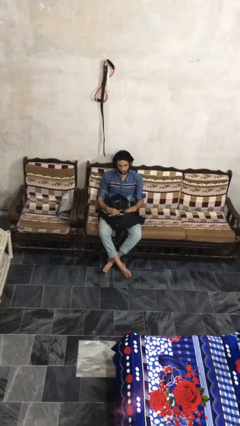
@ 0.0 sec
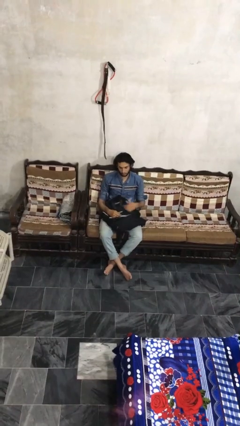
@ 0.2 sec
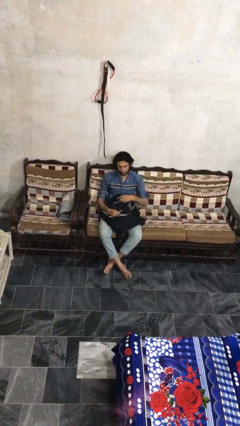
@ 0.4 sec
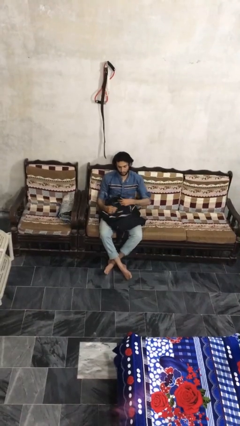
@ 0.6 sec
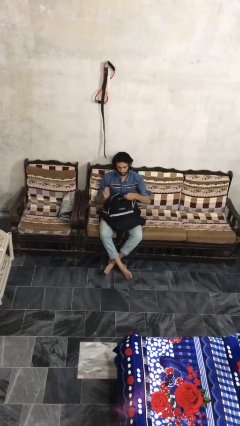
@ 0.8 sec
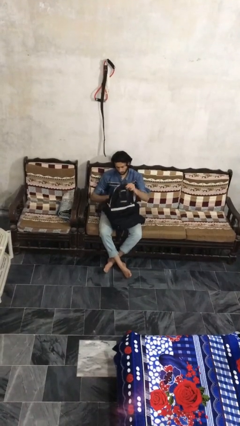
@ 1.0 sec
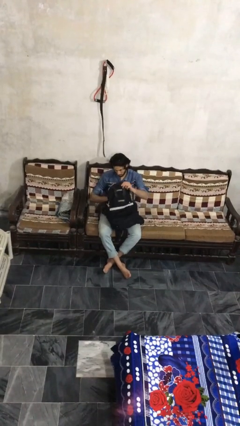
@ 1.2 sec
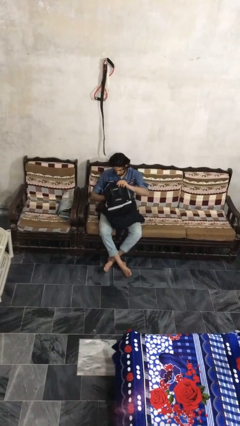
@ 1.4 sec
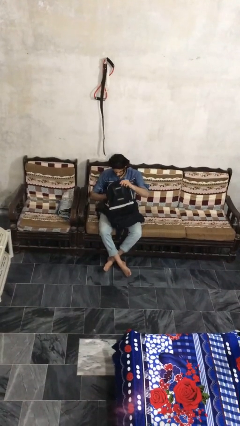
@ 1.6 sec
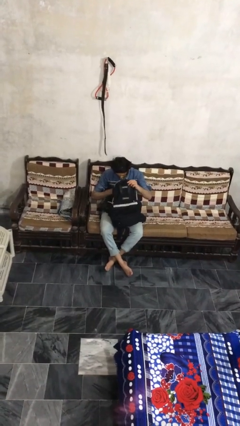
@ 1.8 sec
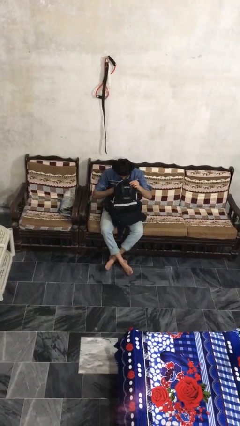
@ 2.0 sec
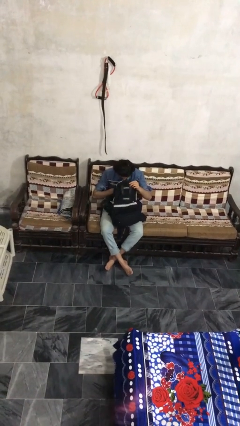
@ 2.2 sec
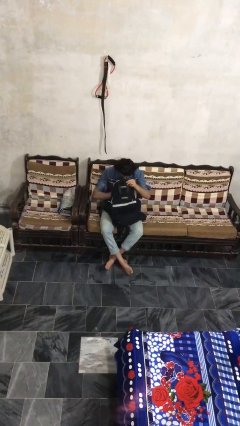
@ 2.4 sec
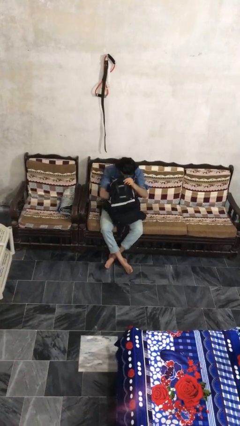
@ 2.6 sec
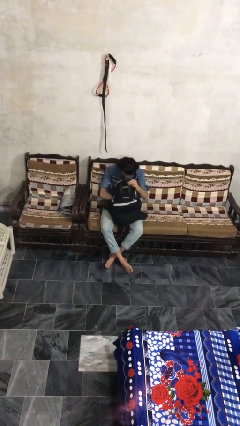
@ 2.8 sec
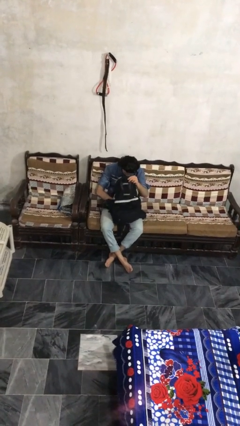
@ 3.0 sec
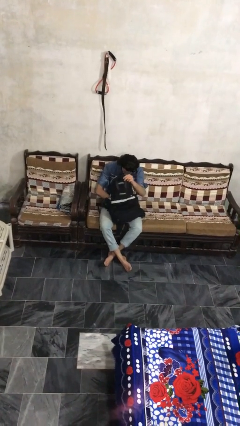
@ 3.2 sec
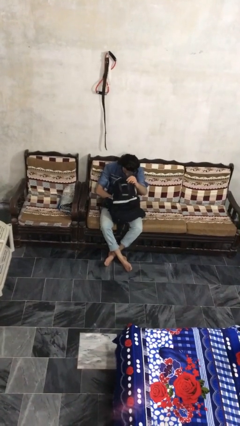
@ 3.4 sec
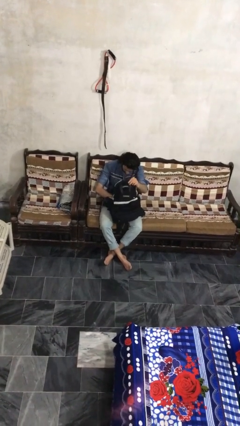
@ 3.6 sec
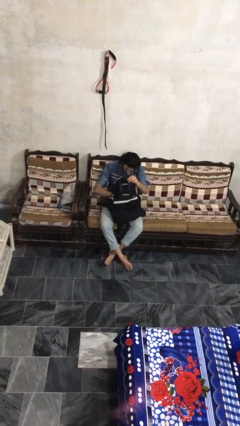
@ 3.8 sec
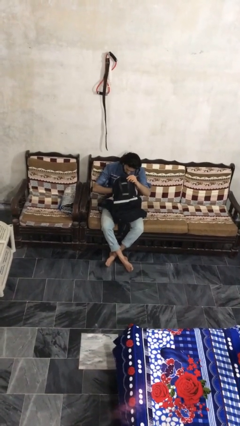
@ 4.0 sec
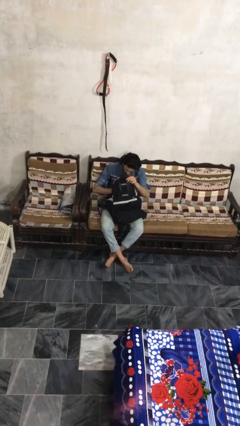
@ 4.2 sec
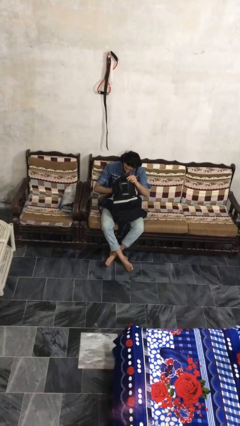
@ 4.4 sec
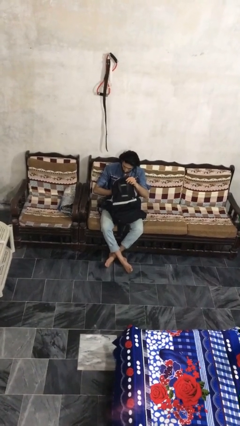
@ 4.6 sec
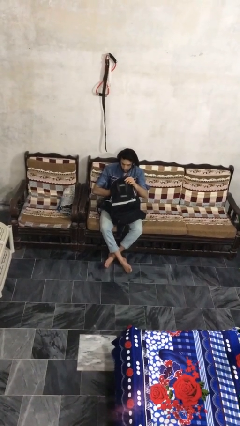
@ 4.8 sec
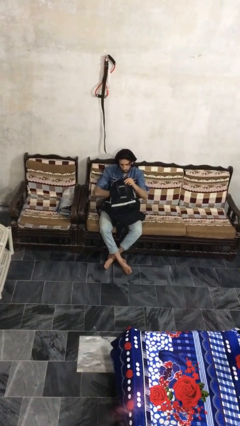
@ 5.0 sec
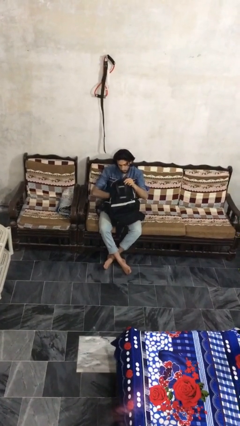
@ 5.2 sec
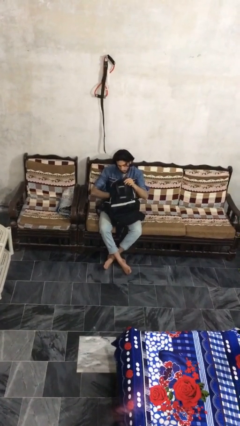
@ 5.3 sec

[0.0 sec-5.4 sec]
person searches in backpack

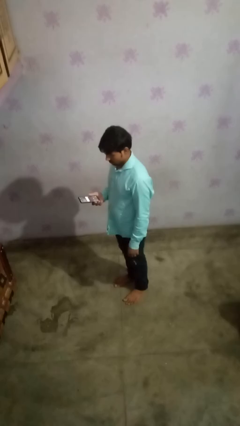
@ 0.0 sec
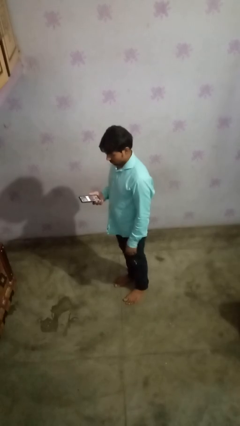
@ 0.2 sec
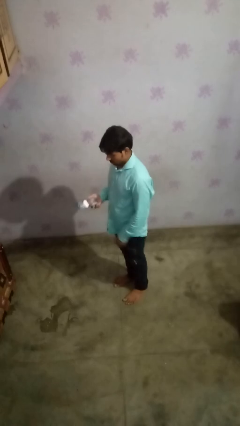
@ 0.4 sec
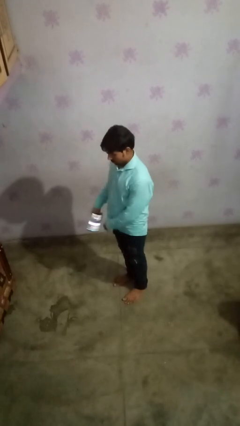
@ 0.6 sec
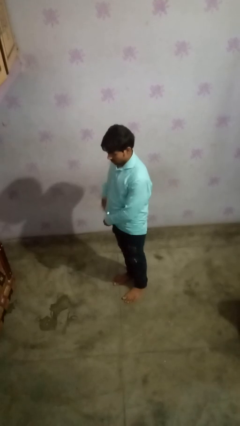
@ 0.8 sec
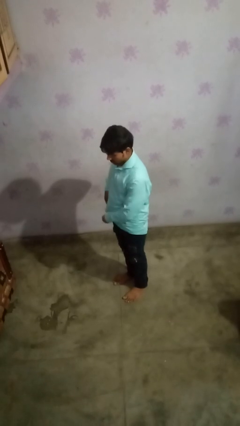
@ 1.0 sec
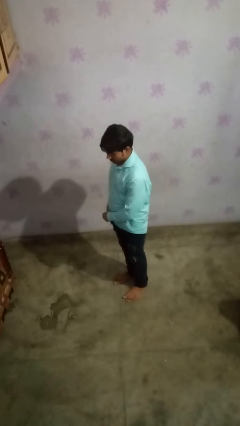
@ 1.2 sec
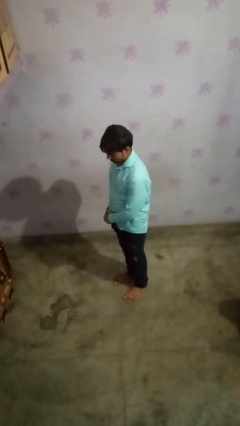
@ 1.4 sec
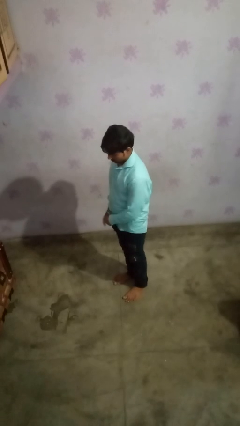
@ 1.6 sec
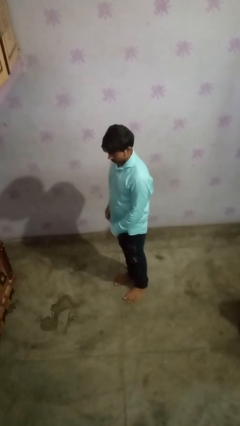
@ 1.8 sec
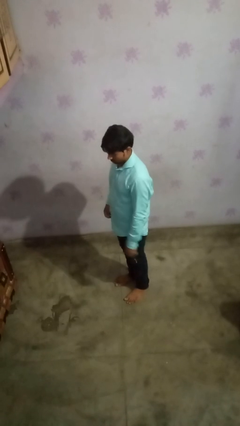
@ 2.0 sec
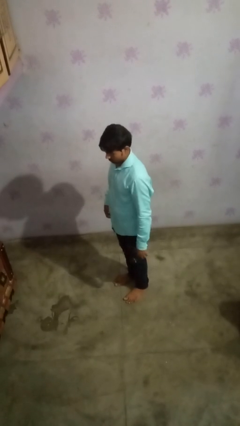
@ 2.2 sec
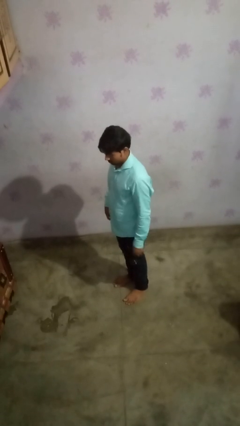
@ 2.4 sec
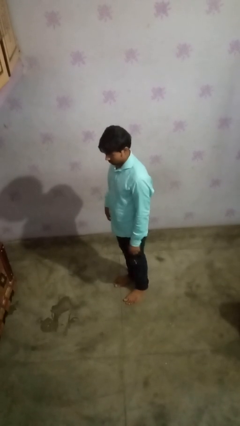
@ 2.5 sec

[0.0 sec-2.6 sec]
person puts phone into pocket

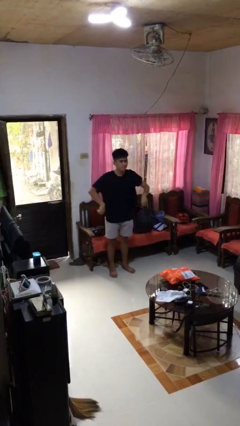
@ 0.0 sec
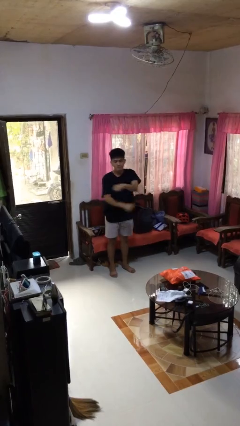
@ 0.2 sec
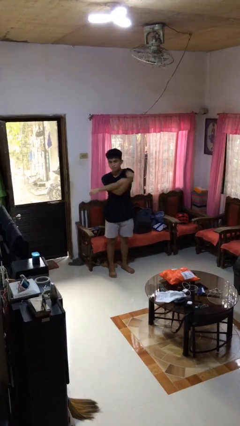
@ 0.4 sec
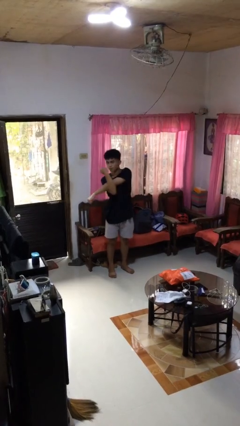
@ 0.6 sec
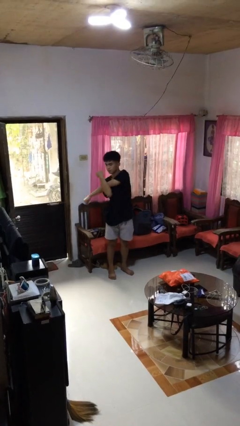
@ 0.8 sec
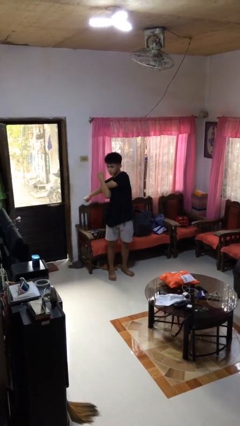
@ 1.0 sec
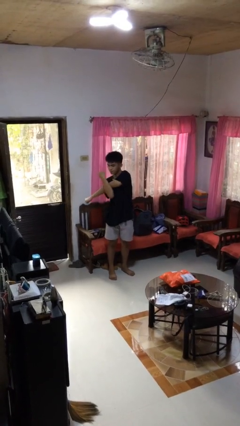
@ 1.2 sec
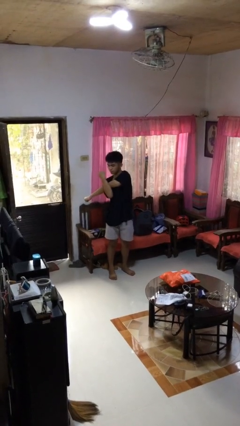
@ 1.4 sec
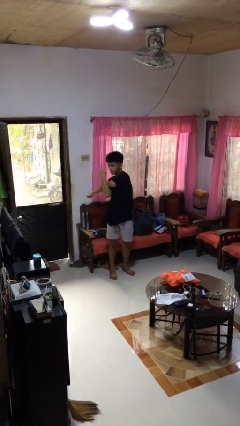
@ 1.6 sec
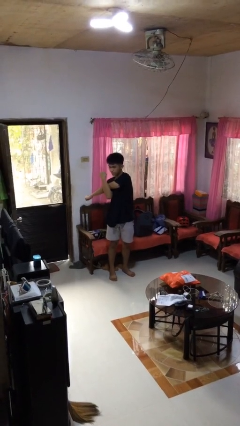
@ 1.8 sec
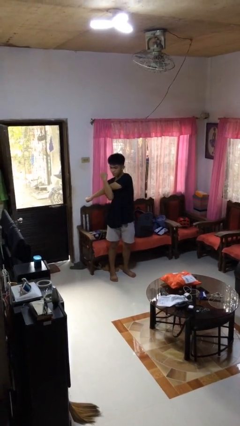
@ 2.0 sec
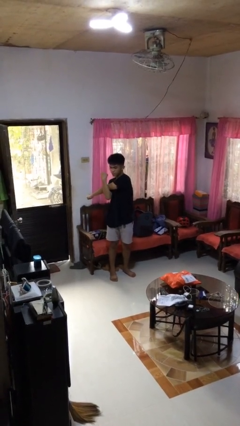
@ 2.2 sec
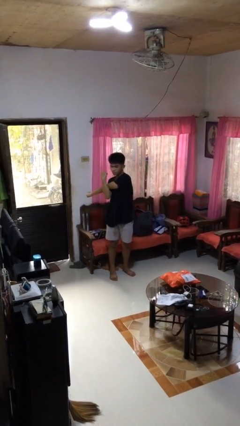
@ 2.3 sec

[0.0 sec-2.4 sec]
person stretches arms to side

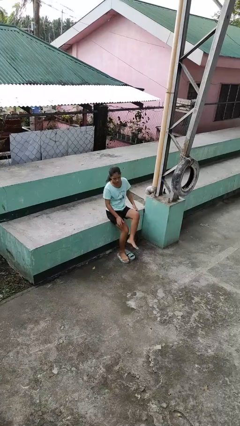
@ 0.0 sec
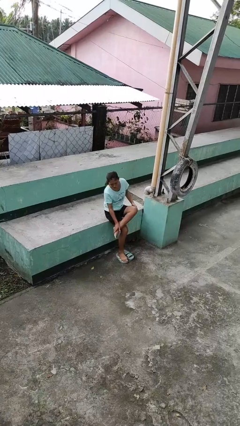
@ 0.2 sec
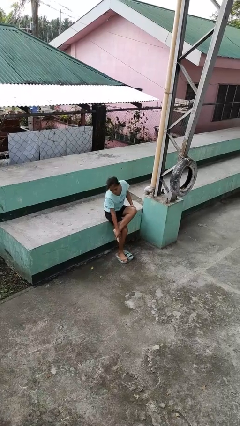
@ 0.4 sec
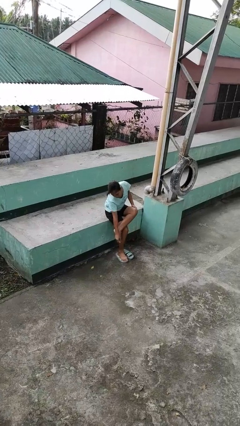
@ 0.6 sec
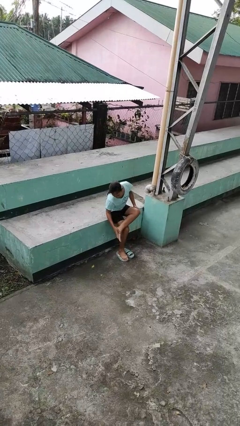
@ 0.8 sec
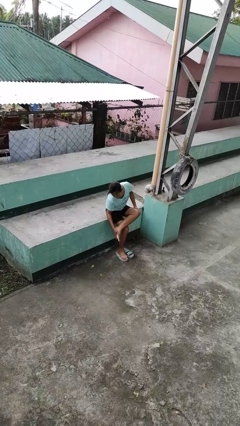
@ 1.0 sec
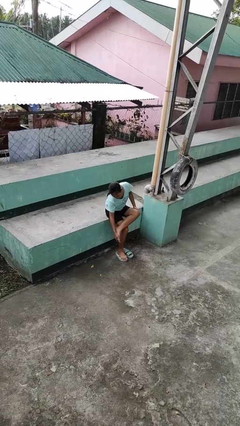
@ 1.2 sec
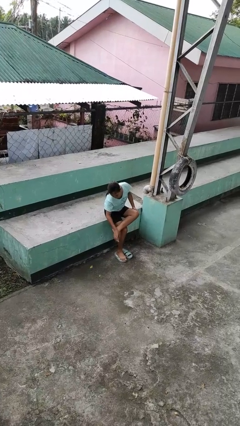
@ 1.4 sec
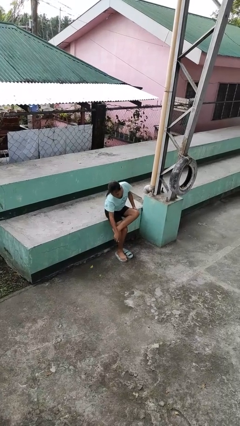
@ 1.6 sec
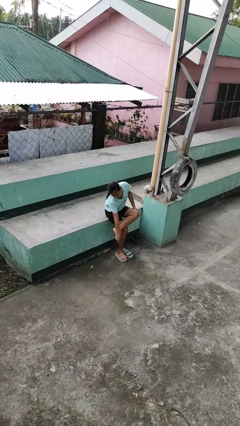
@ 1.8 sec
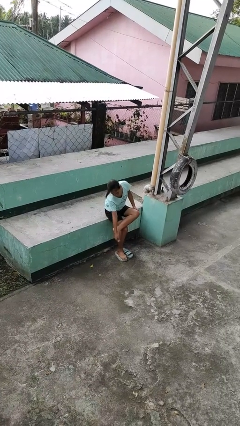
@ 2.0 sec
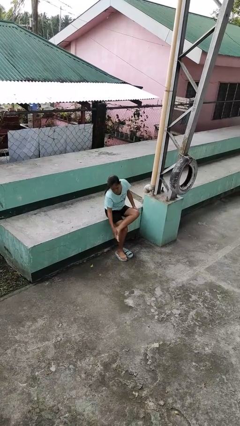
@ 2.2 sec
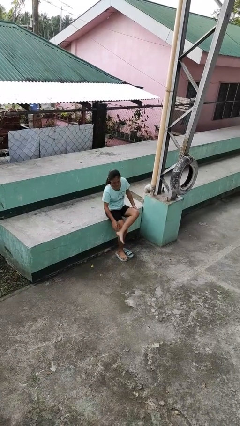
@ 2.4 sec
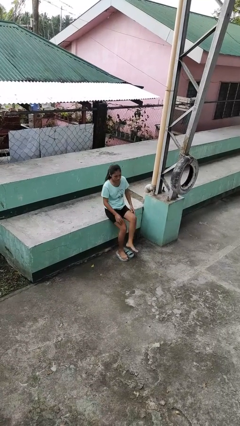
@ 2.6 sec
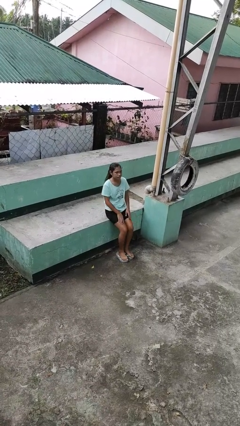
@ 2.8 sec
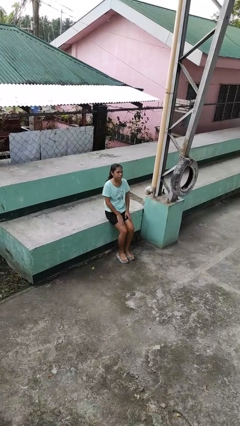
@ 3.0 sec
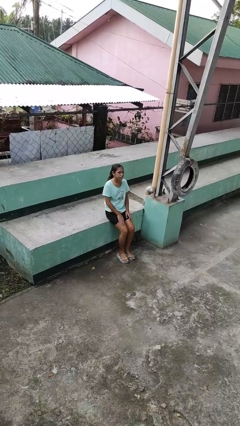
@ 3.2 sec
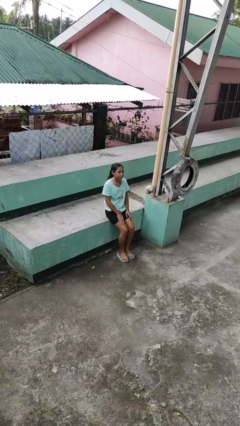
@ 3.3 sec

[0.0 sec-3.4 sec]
person rubs foot

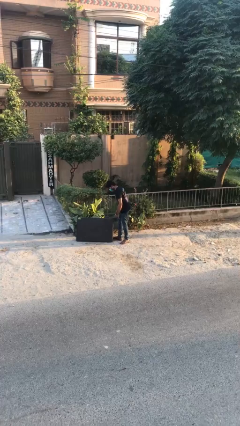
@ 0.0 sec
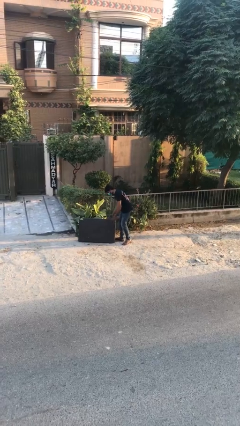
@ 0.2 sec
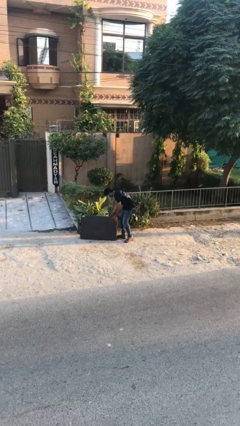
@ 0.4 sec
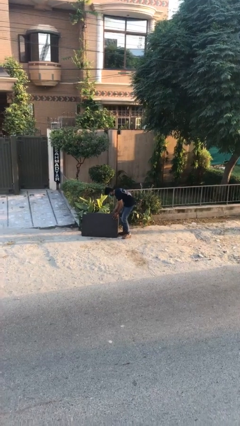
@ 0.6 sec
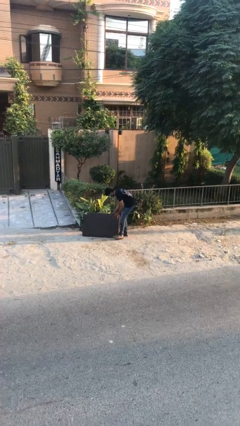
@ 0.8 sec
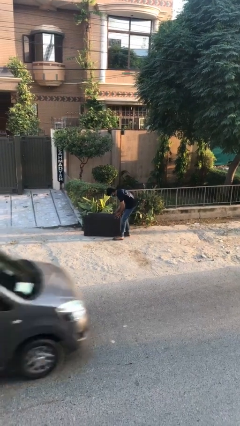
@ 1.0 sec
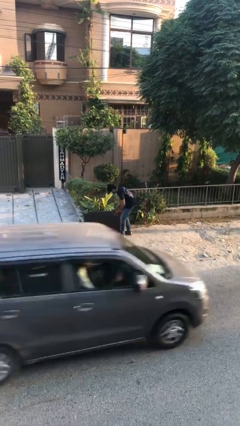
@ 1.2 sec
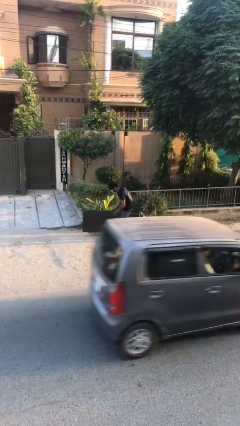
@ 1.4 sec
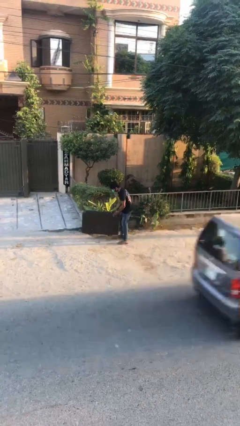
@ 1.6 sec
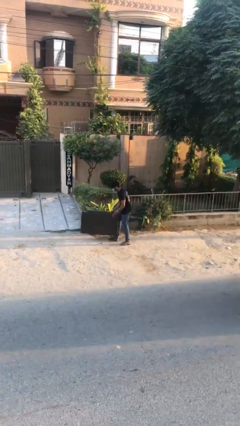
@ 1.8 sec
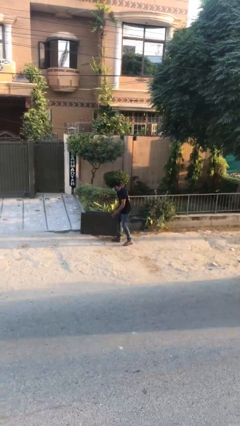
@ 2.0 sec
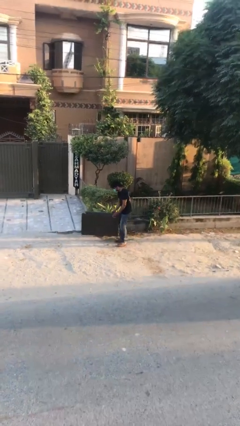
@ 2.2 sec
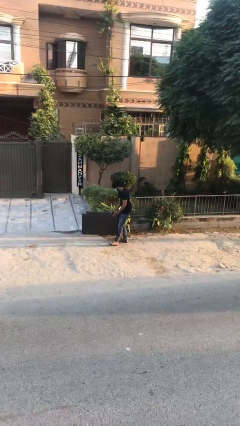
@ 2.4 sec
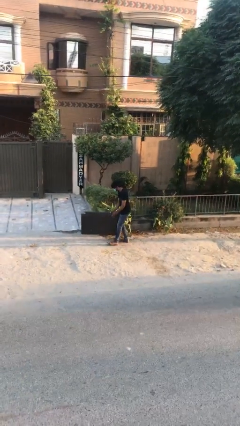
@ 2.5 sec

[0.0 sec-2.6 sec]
person picks up object from floor

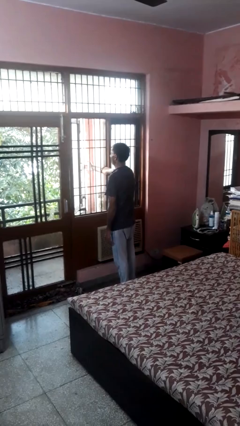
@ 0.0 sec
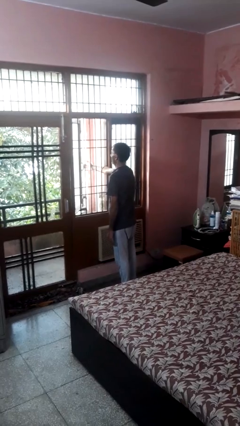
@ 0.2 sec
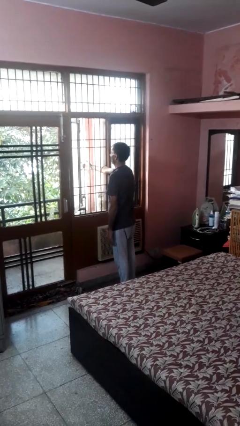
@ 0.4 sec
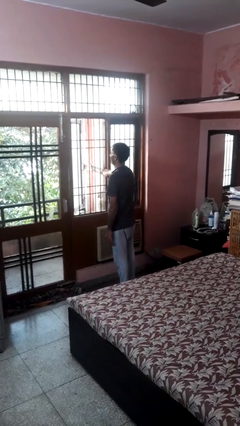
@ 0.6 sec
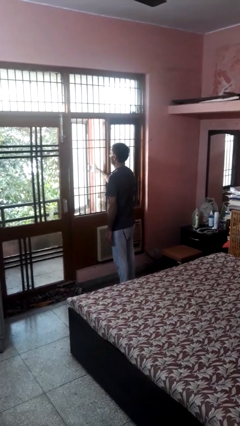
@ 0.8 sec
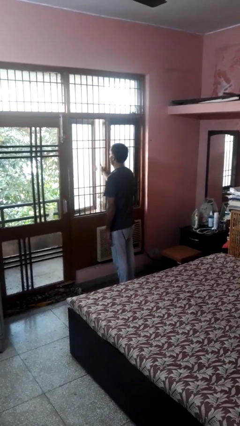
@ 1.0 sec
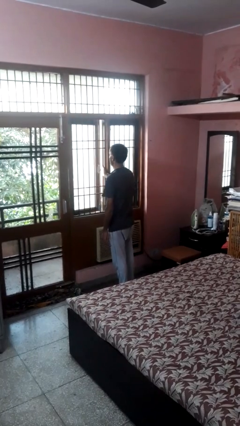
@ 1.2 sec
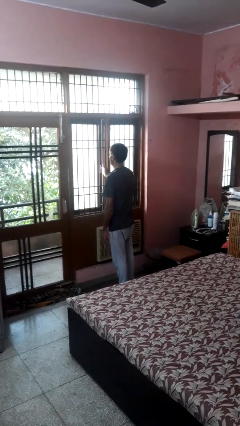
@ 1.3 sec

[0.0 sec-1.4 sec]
person closes home window
